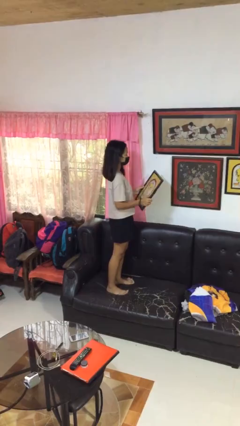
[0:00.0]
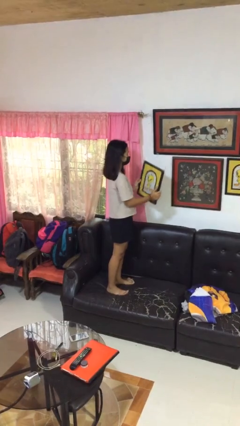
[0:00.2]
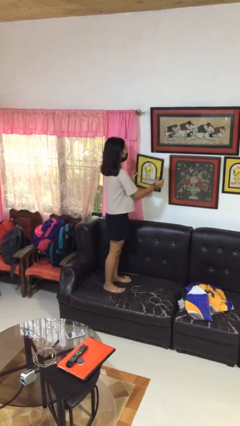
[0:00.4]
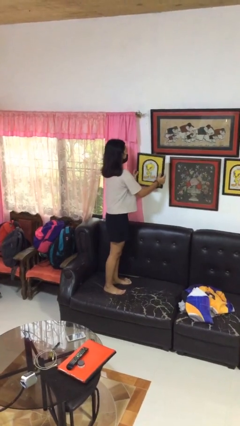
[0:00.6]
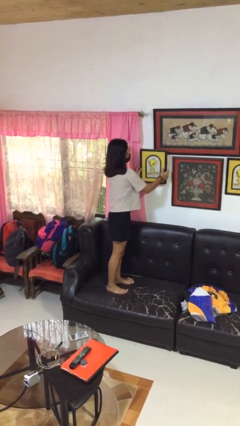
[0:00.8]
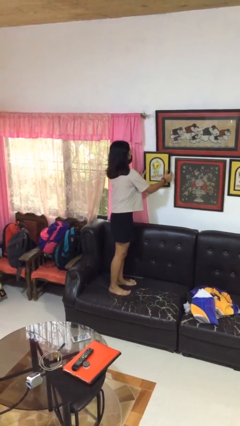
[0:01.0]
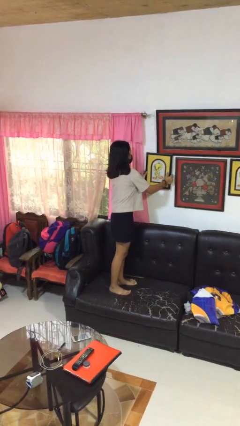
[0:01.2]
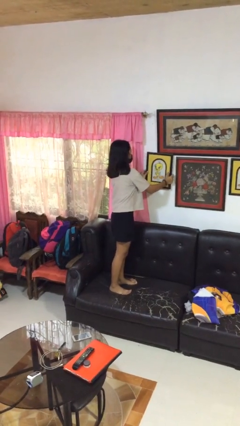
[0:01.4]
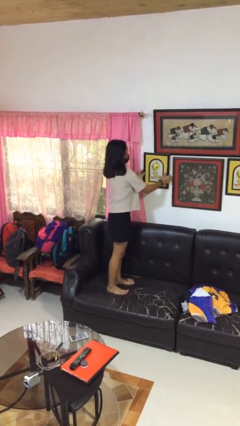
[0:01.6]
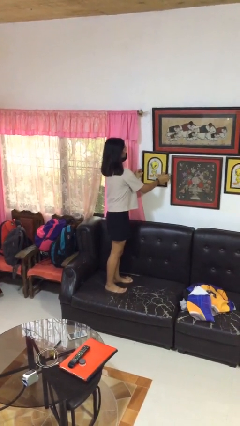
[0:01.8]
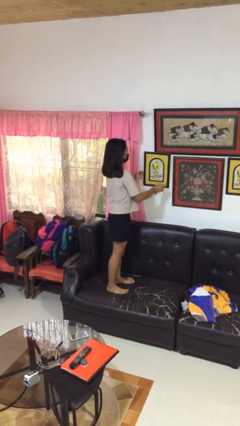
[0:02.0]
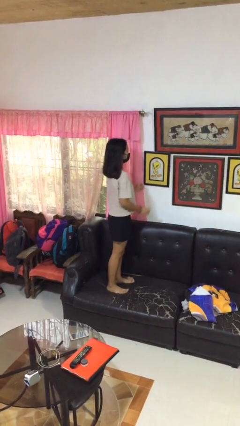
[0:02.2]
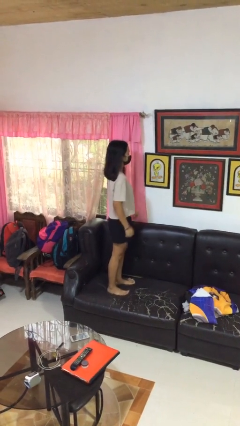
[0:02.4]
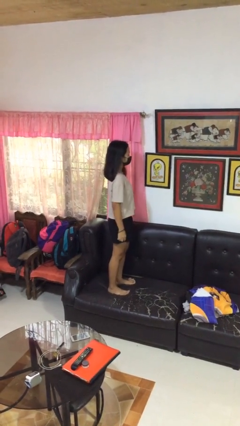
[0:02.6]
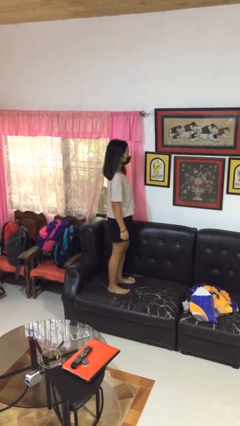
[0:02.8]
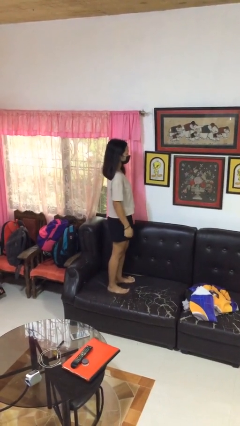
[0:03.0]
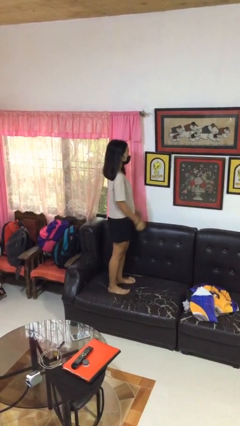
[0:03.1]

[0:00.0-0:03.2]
person puts up picture frame

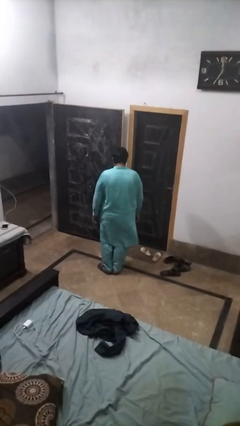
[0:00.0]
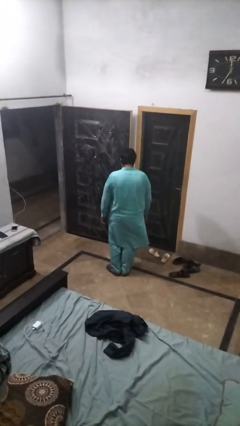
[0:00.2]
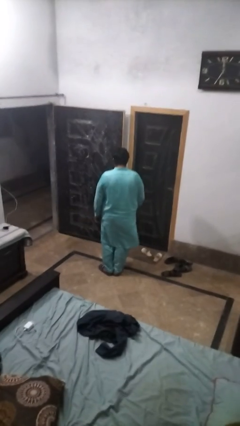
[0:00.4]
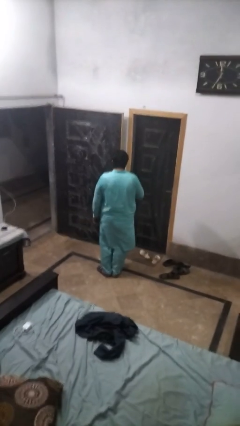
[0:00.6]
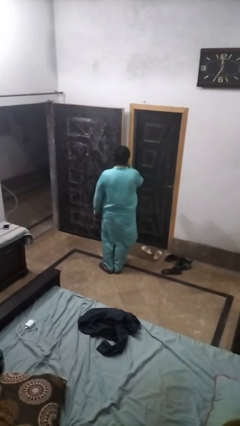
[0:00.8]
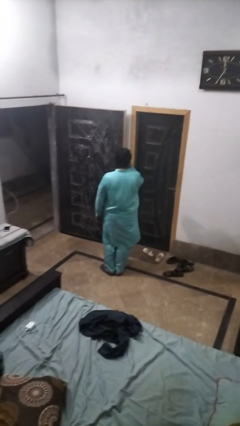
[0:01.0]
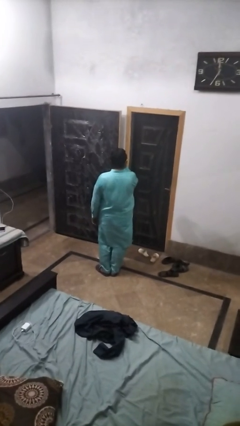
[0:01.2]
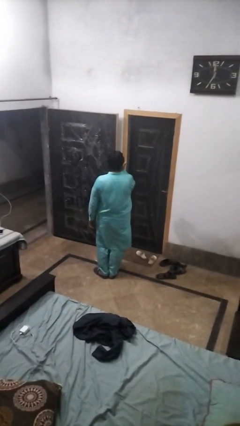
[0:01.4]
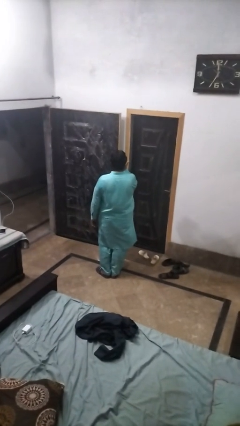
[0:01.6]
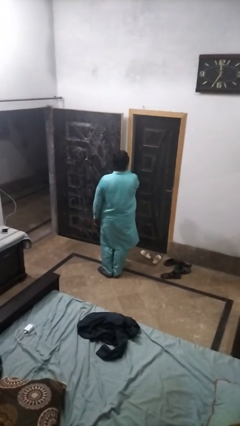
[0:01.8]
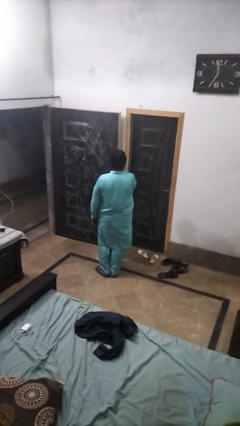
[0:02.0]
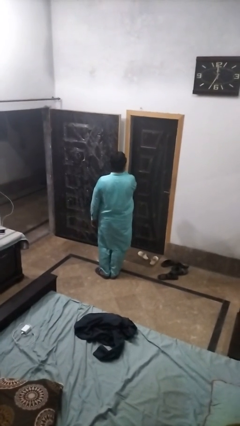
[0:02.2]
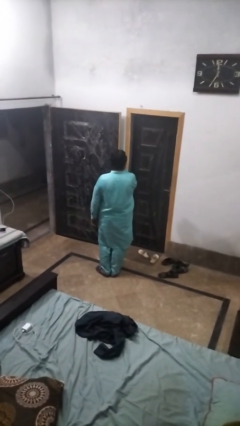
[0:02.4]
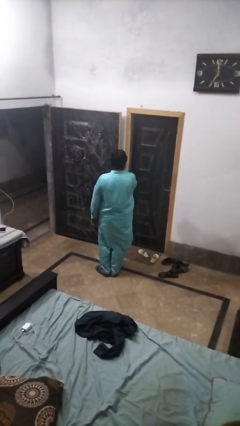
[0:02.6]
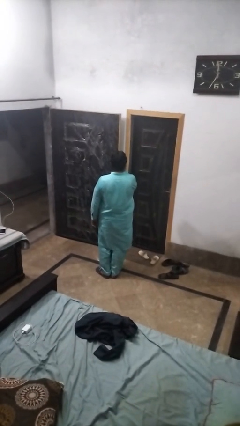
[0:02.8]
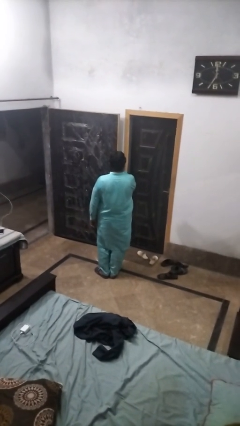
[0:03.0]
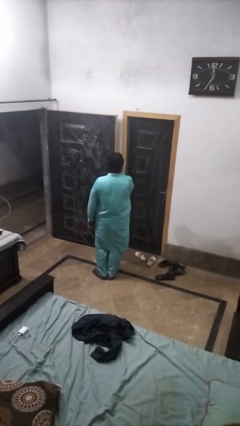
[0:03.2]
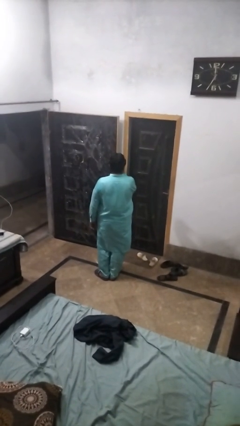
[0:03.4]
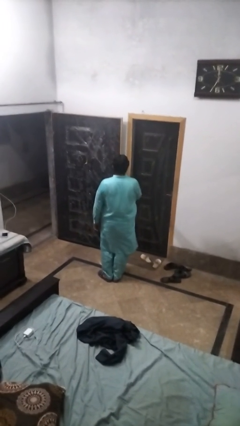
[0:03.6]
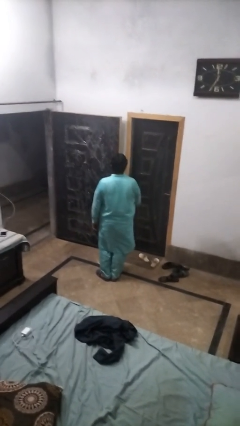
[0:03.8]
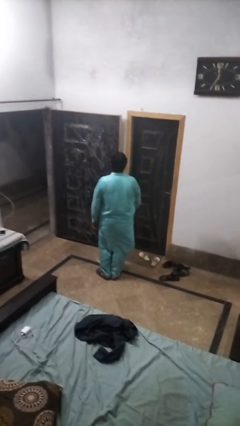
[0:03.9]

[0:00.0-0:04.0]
person licks fingers

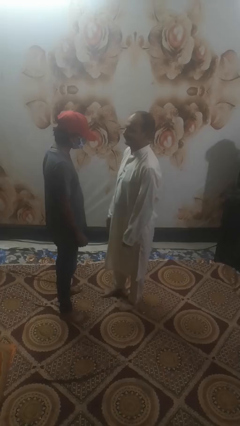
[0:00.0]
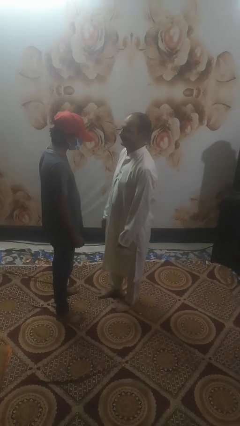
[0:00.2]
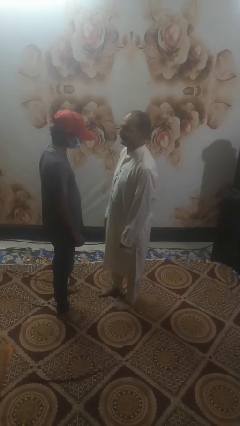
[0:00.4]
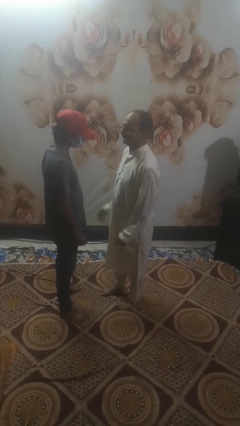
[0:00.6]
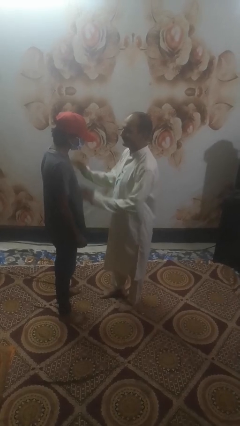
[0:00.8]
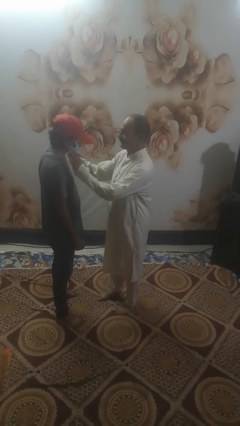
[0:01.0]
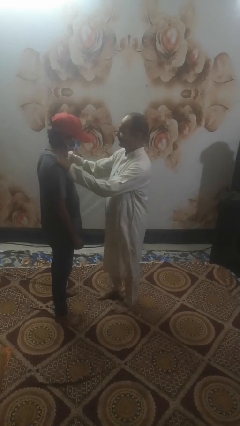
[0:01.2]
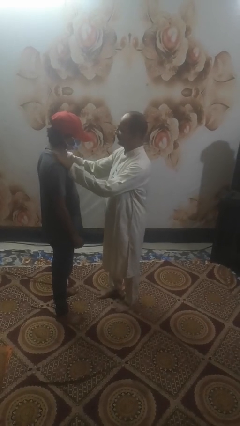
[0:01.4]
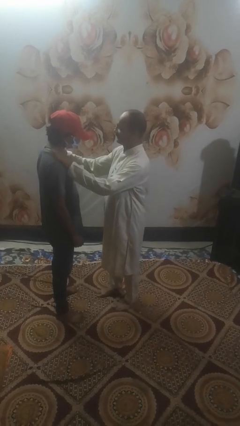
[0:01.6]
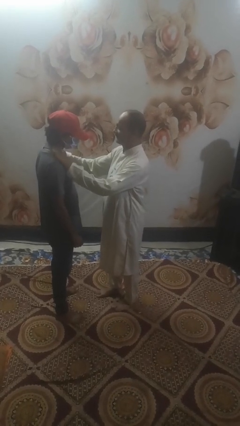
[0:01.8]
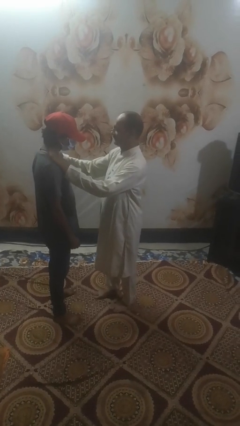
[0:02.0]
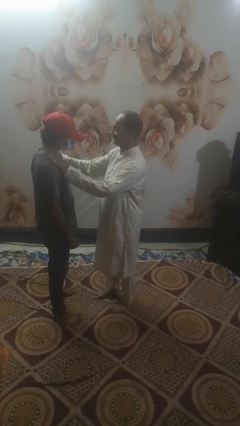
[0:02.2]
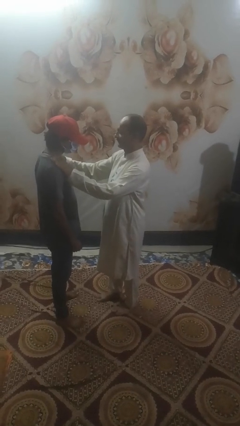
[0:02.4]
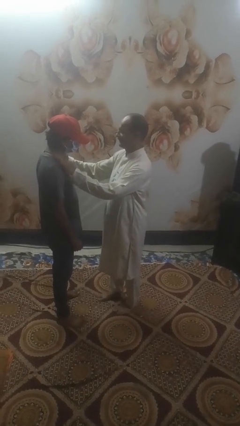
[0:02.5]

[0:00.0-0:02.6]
person pounds shoulders of person

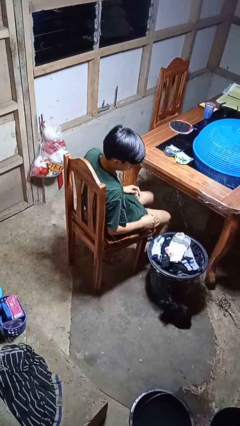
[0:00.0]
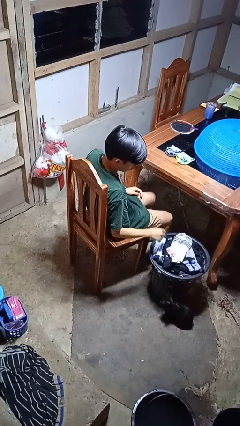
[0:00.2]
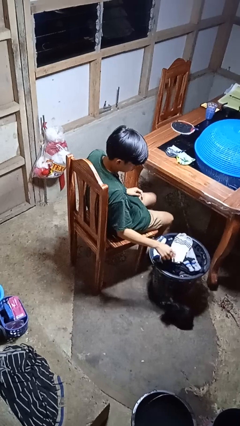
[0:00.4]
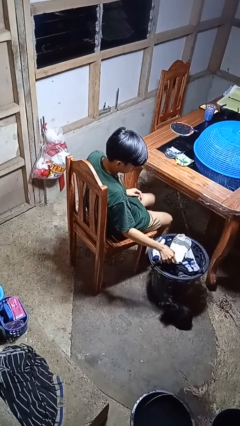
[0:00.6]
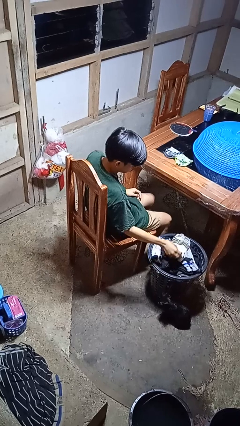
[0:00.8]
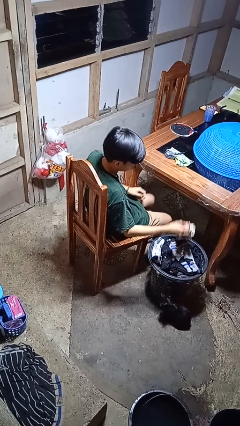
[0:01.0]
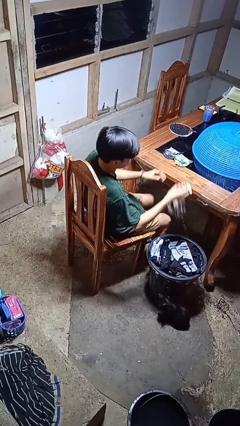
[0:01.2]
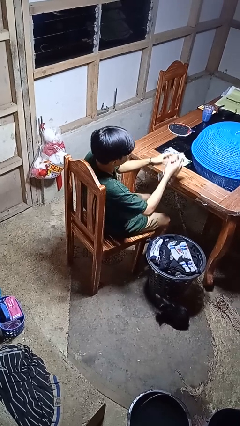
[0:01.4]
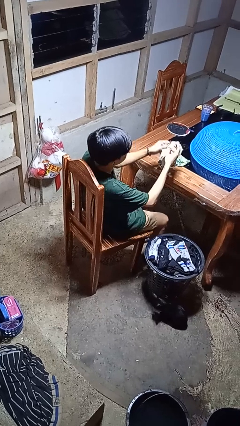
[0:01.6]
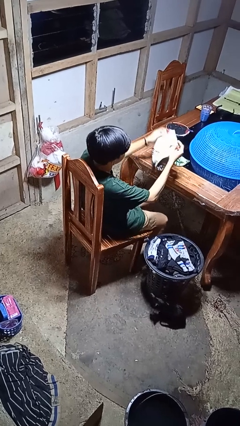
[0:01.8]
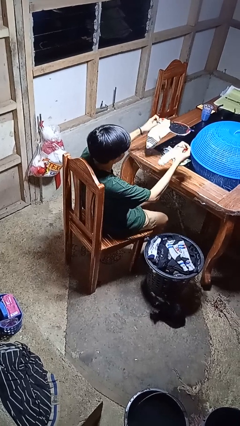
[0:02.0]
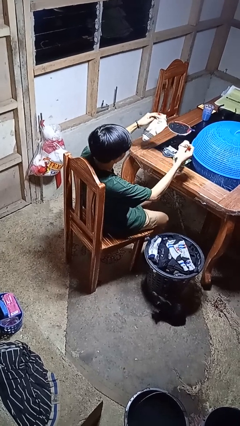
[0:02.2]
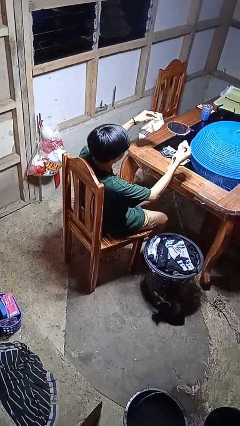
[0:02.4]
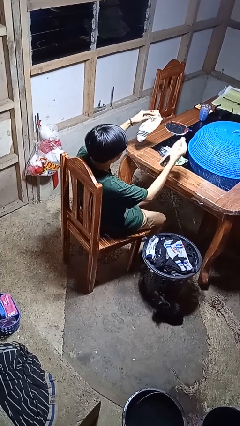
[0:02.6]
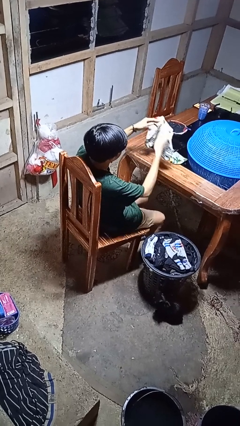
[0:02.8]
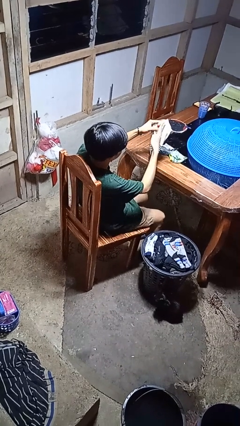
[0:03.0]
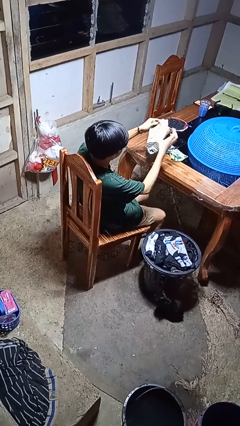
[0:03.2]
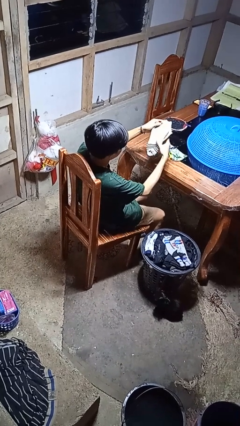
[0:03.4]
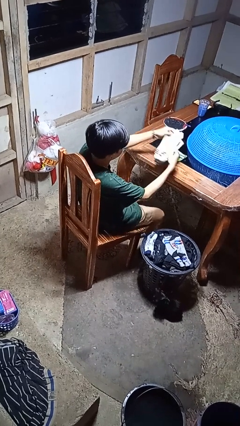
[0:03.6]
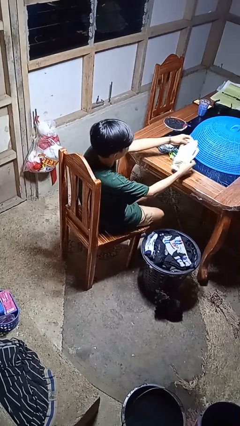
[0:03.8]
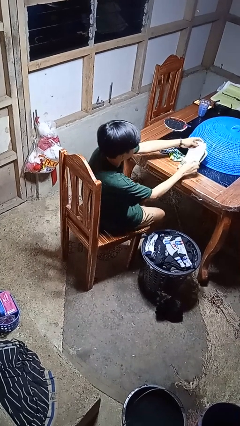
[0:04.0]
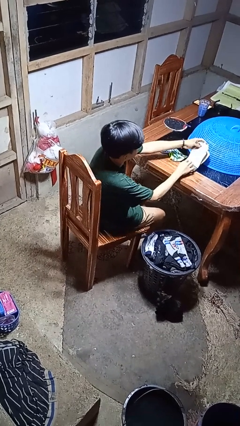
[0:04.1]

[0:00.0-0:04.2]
person folds socks

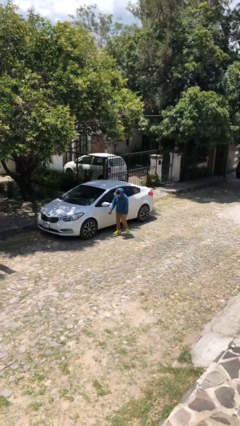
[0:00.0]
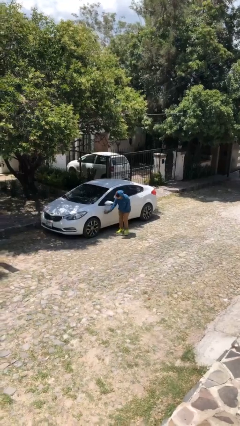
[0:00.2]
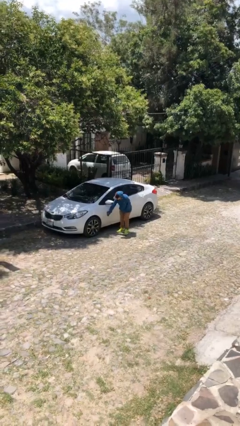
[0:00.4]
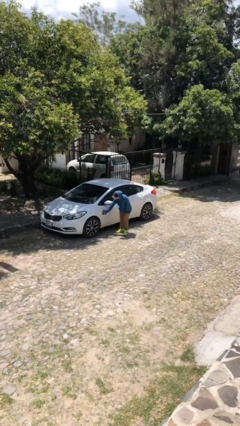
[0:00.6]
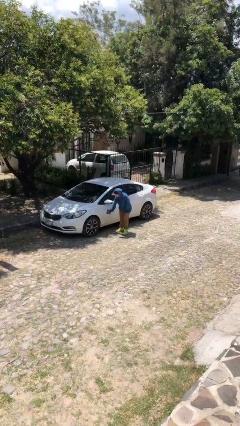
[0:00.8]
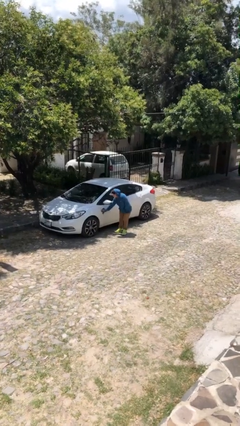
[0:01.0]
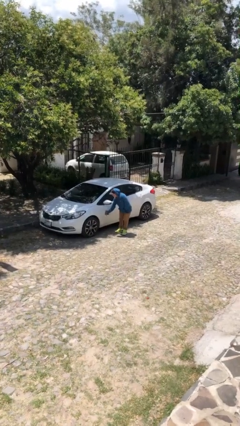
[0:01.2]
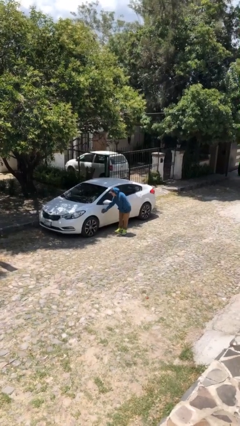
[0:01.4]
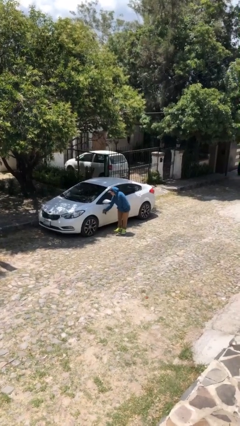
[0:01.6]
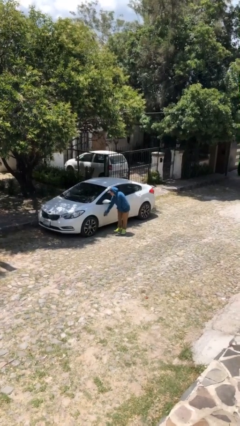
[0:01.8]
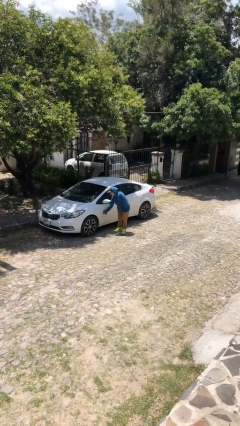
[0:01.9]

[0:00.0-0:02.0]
person polishes car with rag

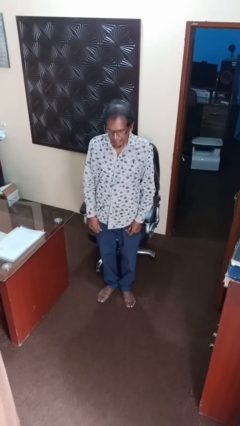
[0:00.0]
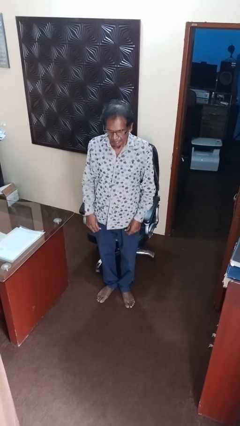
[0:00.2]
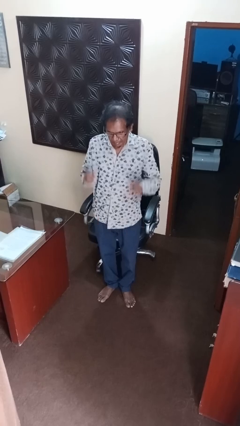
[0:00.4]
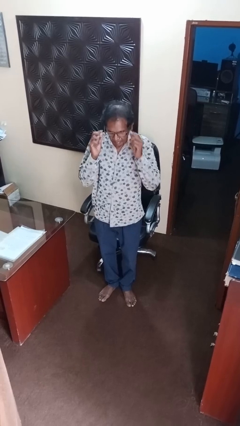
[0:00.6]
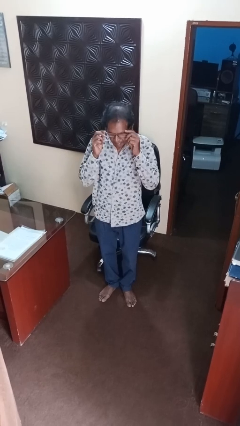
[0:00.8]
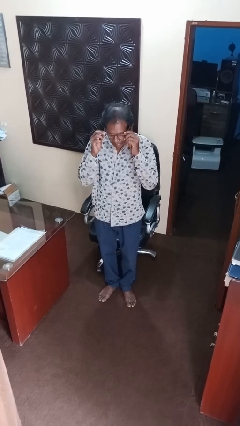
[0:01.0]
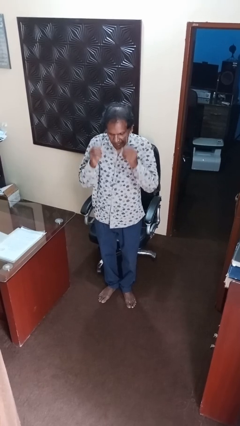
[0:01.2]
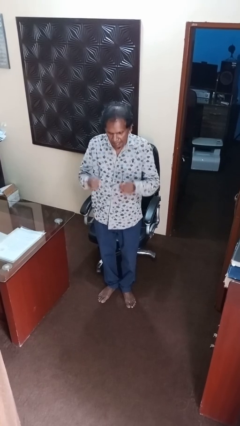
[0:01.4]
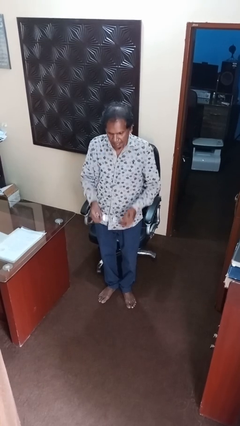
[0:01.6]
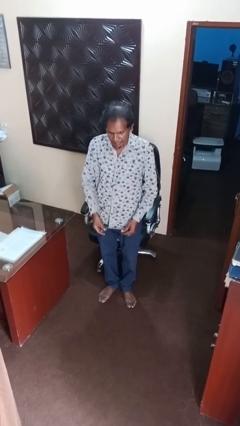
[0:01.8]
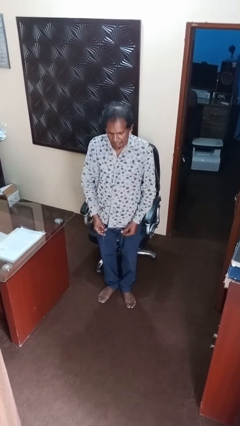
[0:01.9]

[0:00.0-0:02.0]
person takes off glasses
